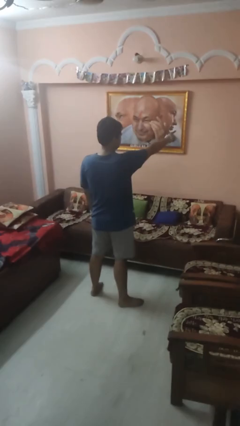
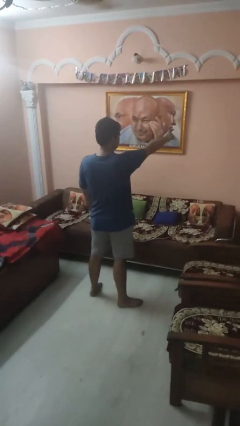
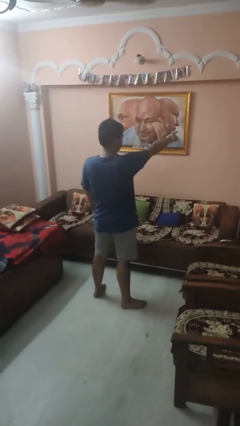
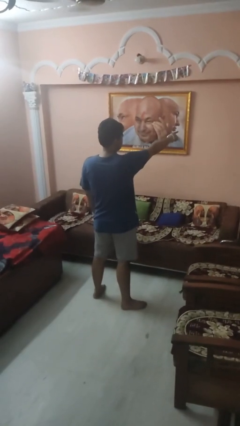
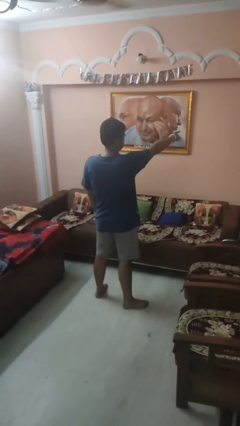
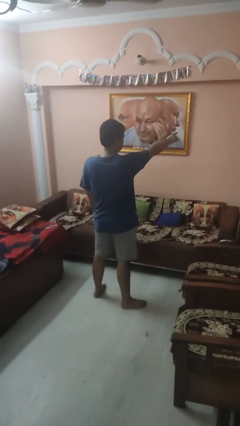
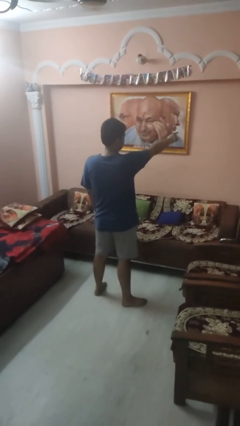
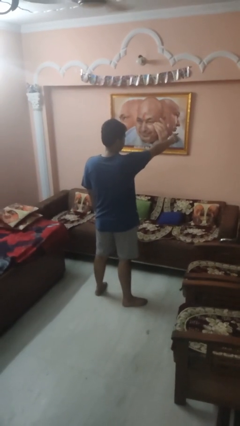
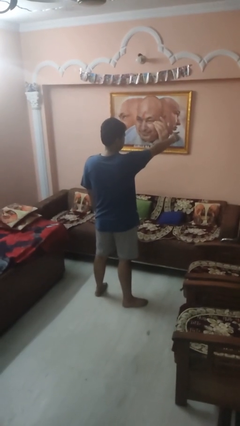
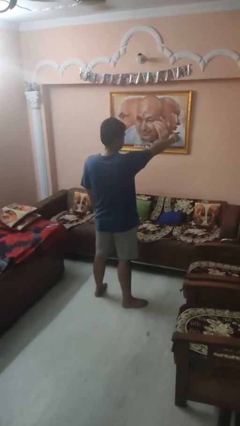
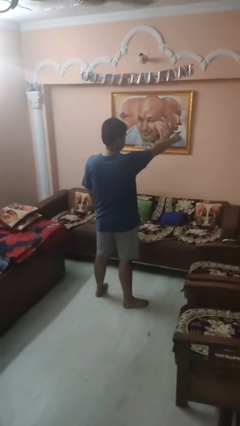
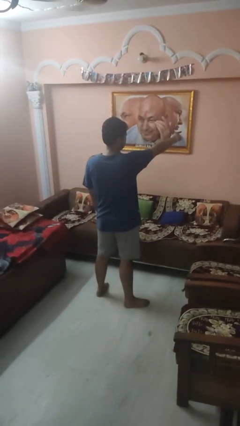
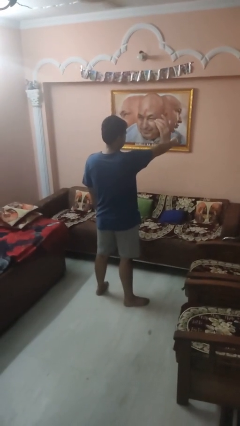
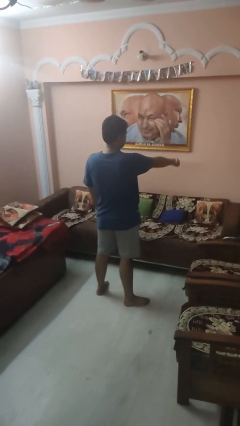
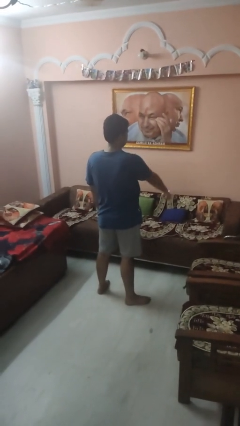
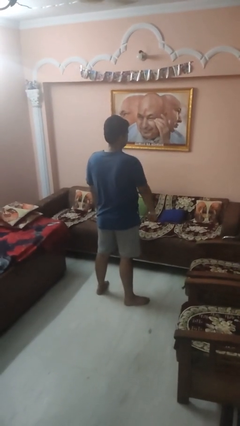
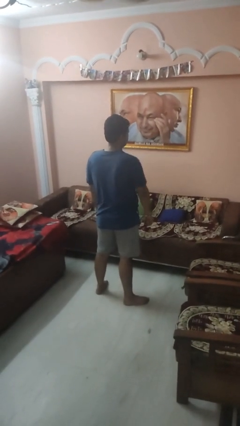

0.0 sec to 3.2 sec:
person points at person

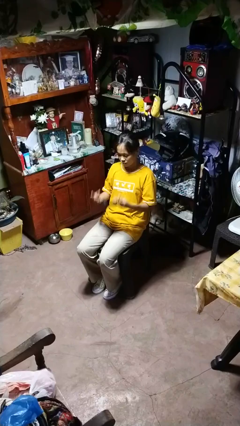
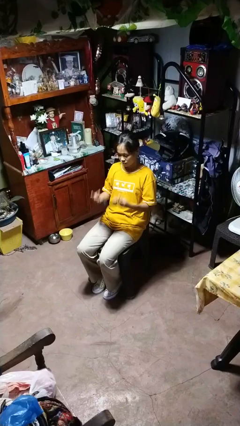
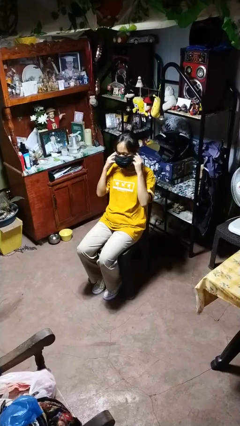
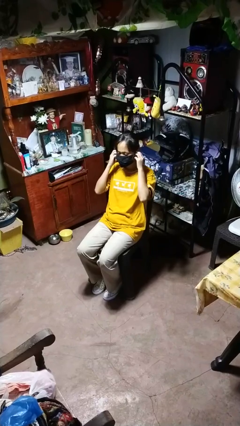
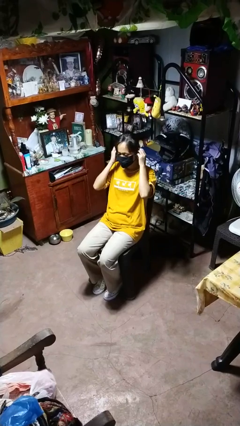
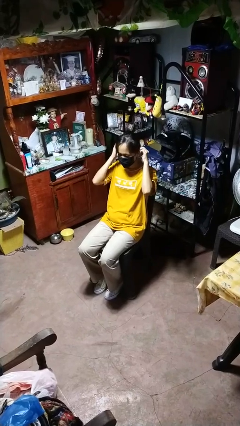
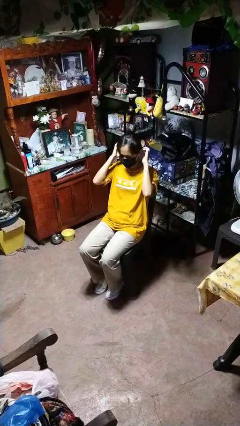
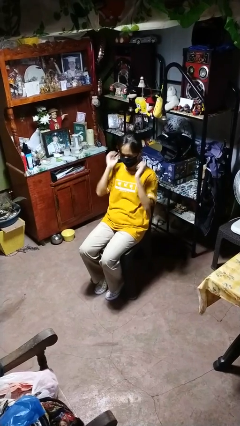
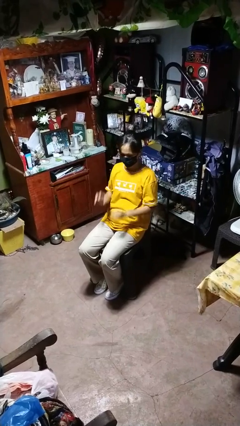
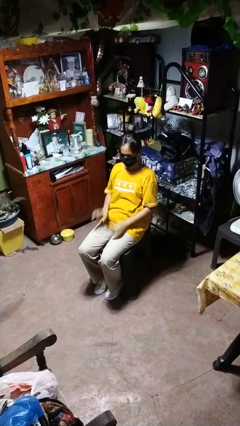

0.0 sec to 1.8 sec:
person puts on facemask

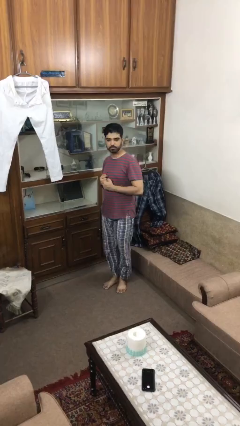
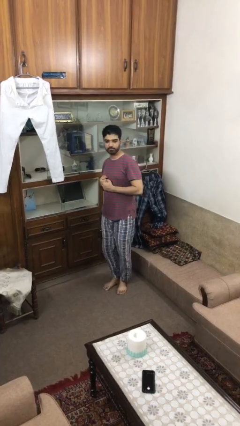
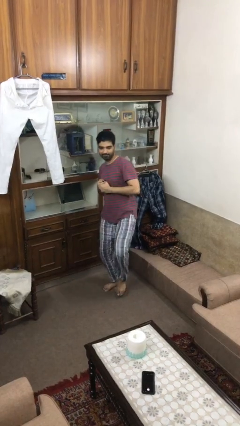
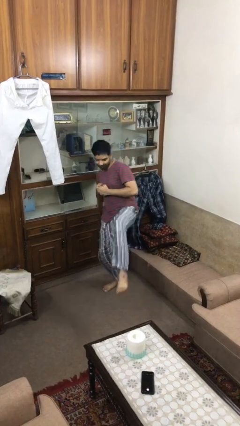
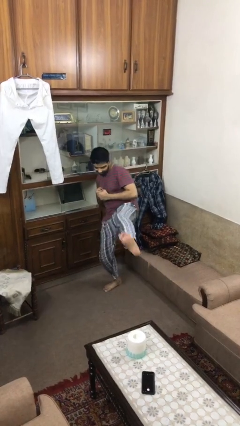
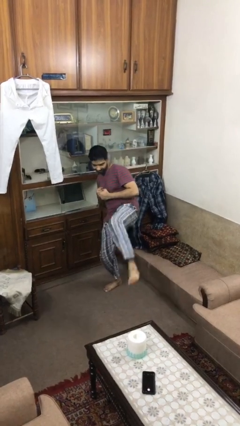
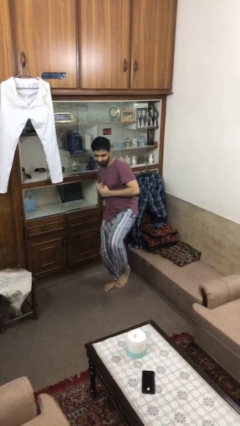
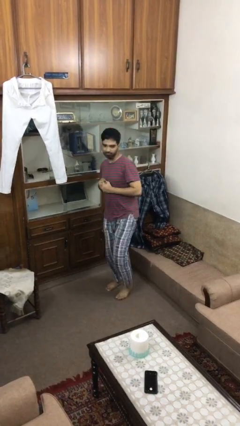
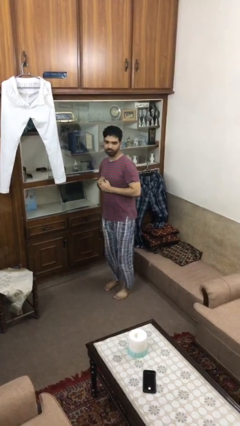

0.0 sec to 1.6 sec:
person karate kicks

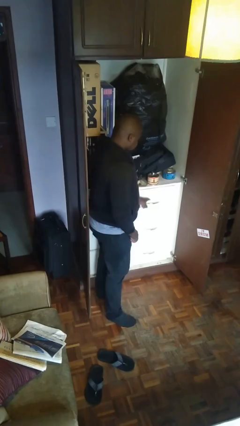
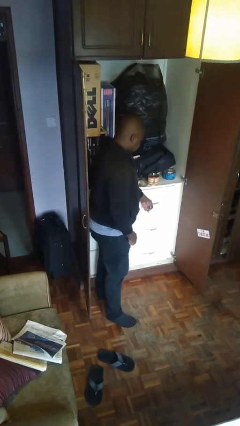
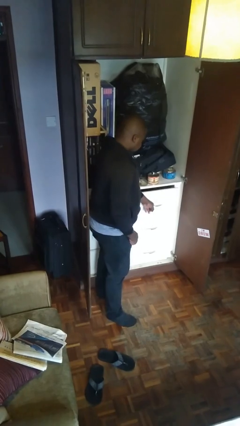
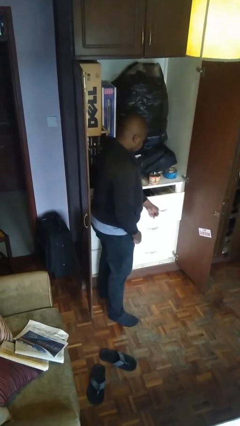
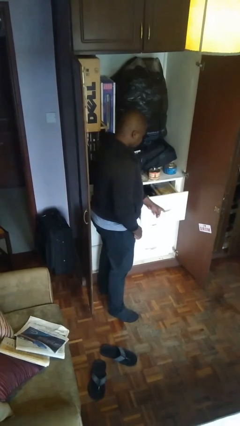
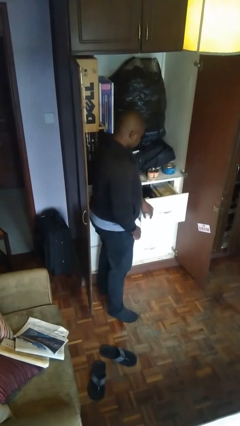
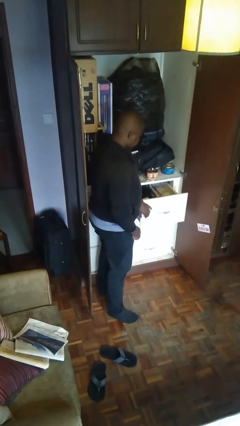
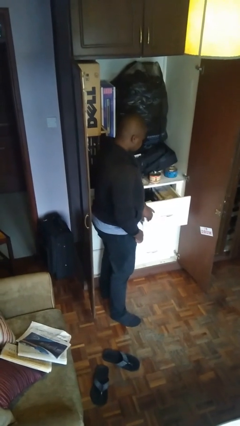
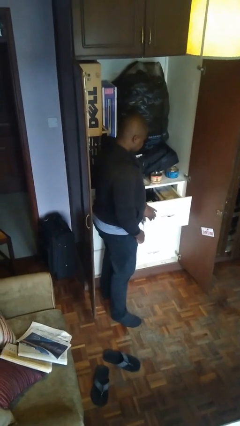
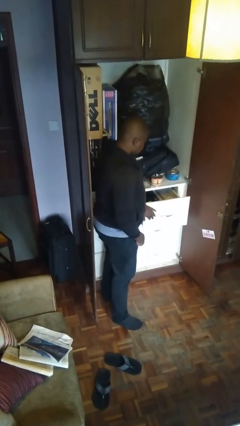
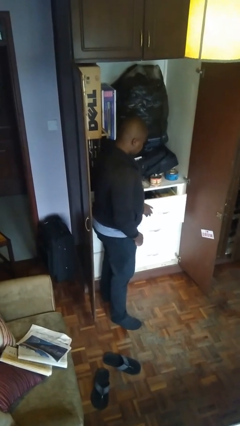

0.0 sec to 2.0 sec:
person opens dresser drawer

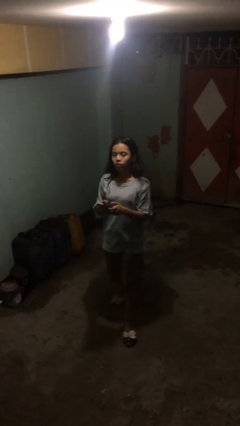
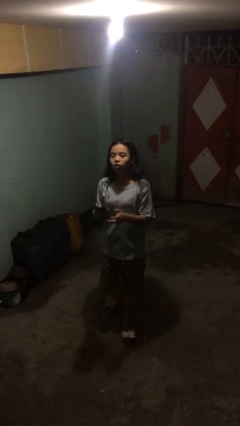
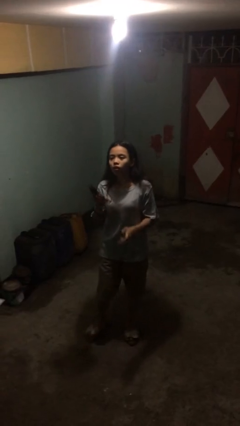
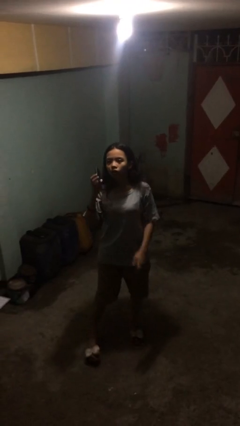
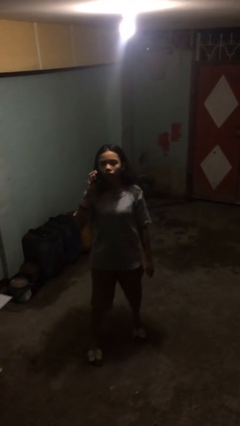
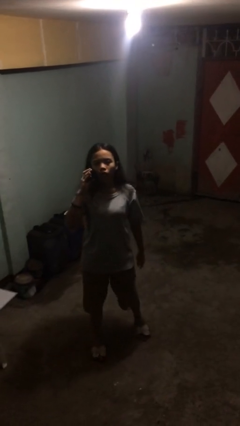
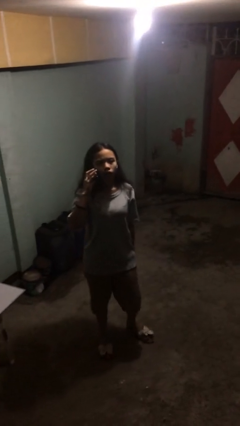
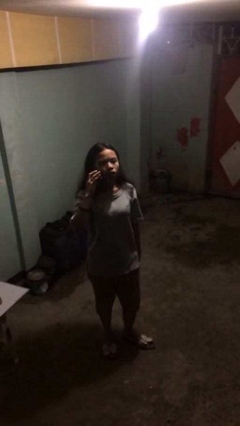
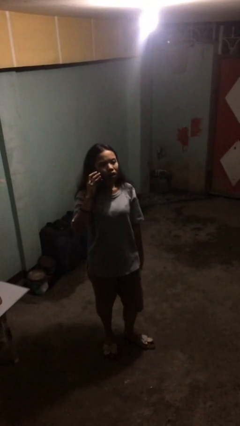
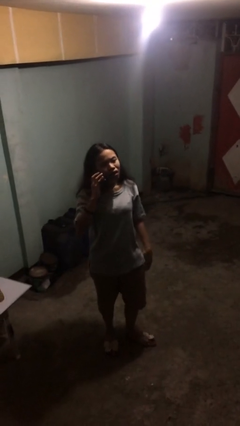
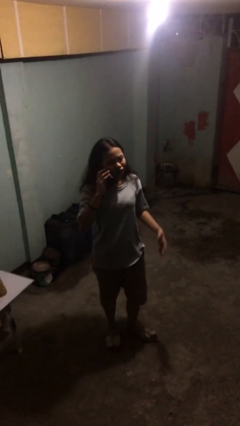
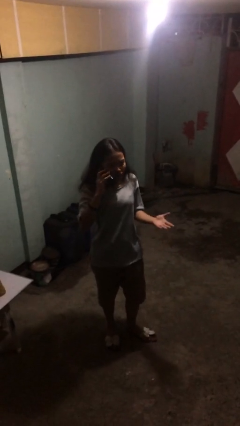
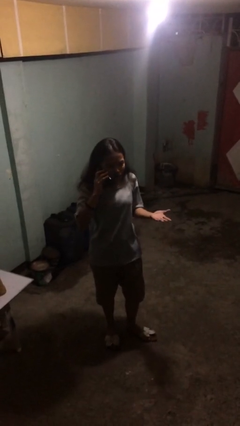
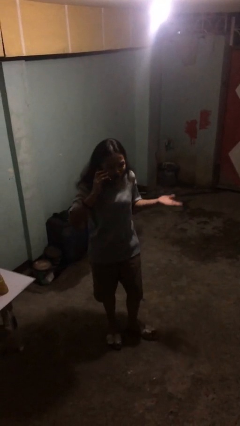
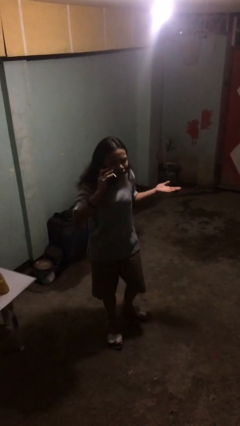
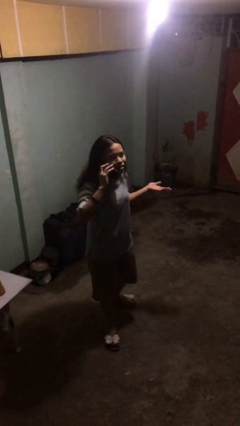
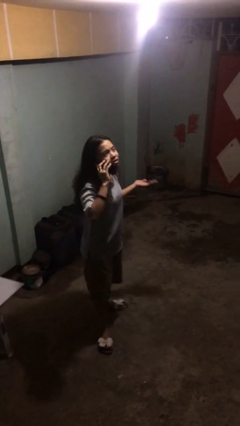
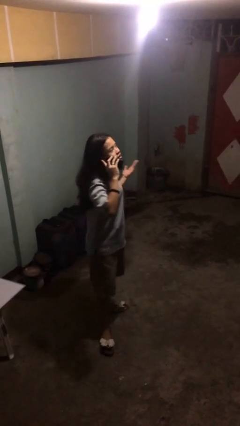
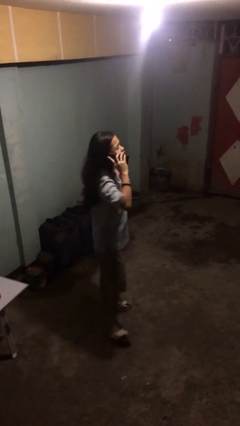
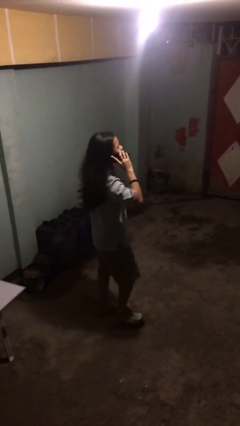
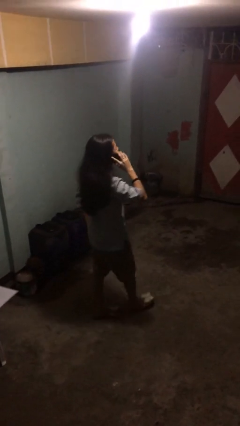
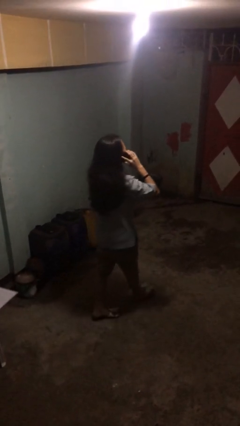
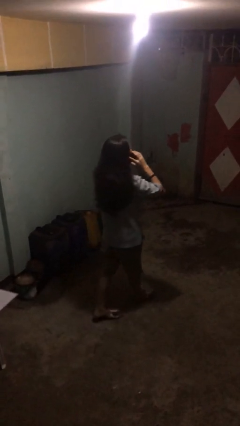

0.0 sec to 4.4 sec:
person talks on phone

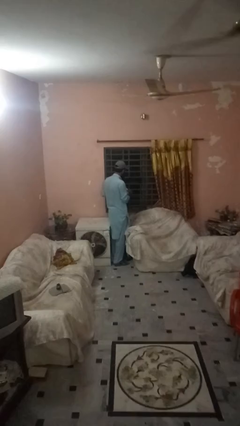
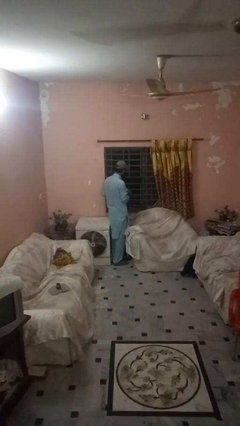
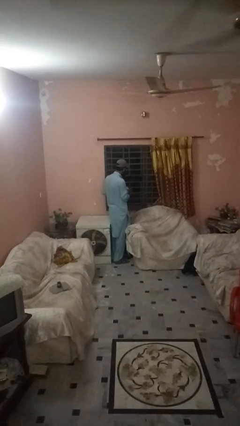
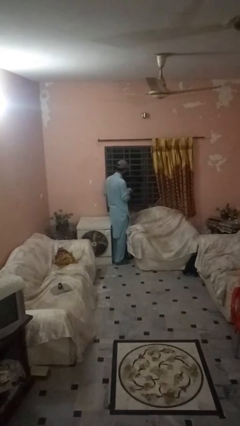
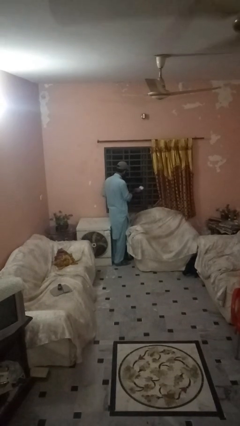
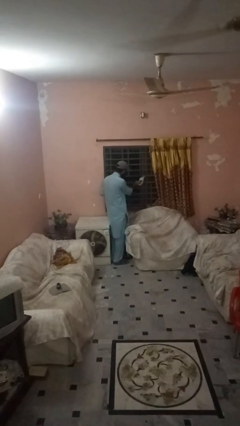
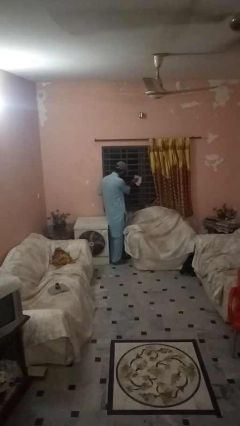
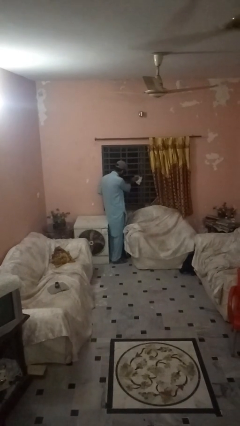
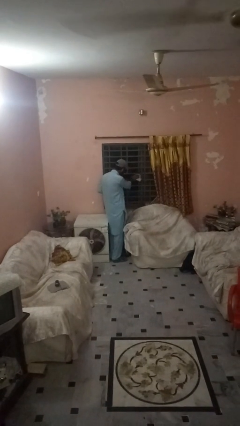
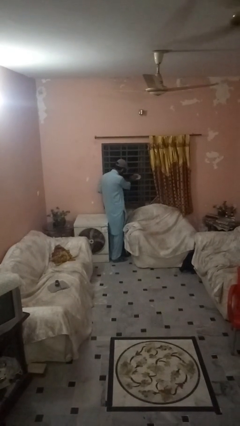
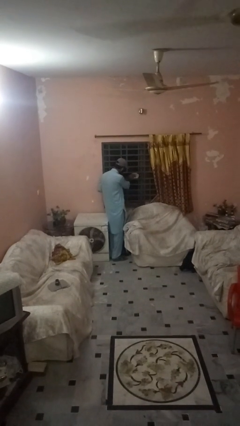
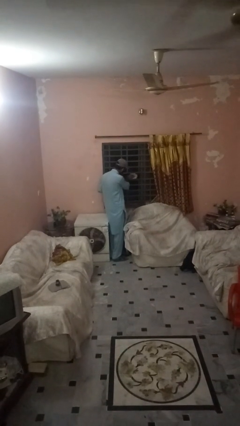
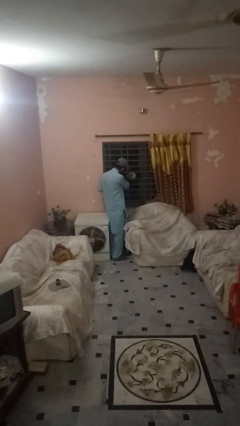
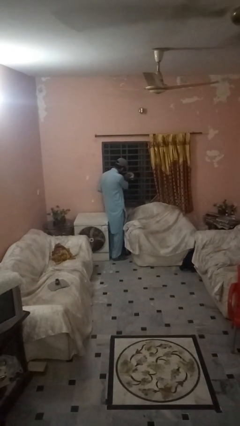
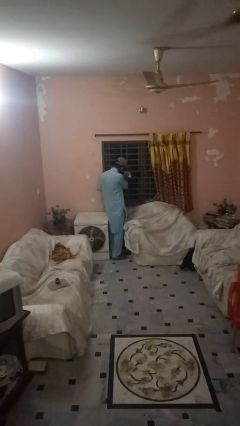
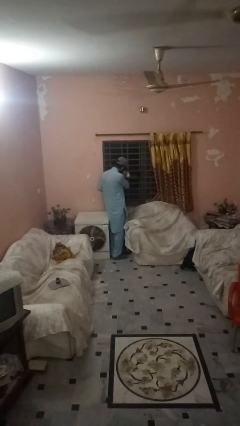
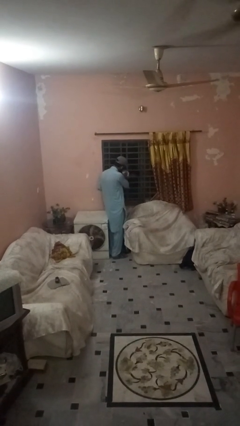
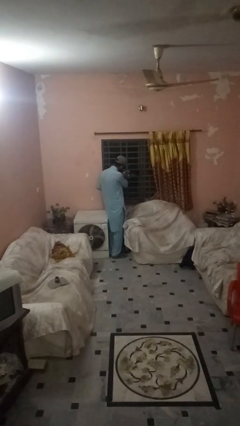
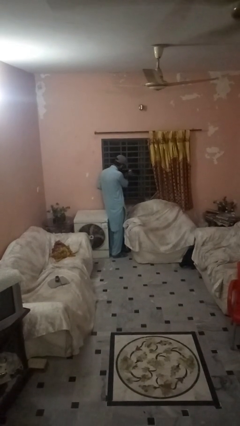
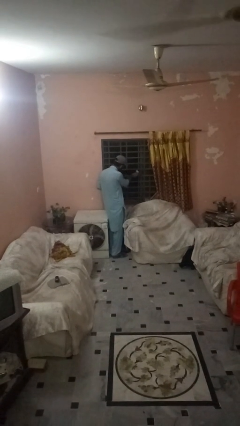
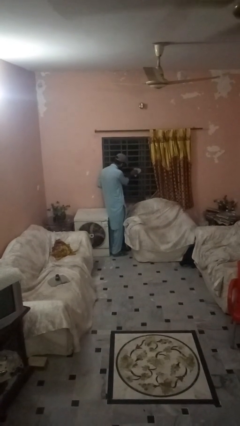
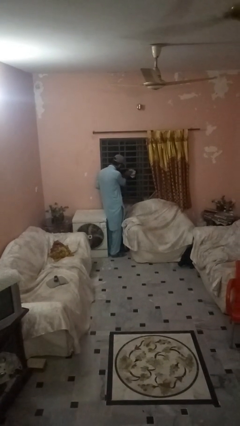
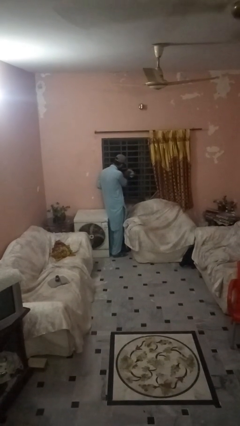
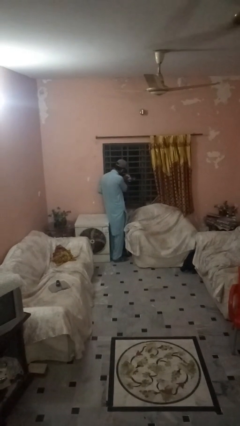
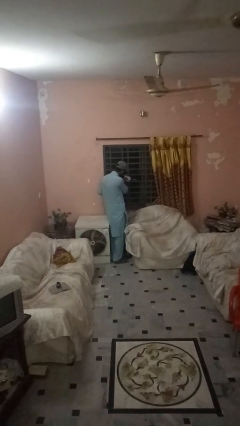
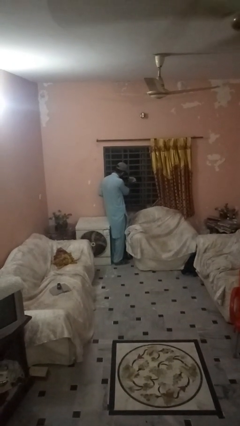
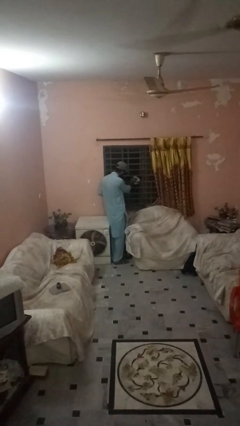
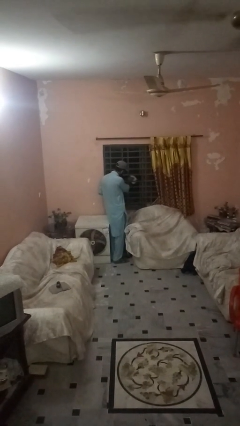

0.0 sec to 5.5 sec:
person washes window
